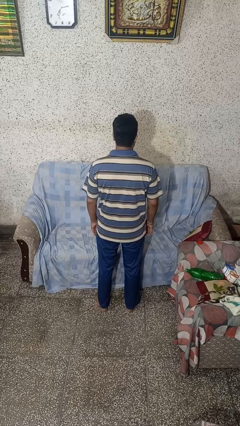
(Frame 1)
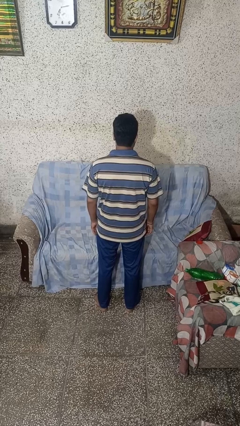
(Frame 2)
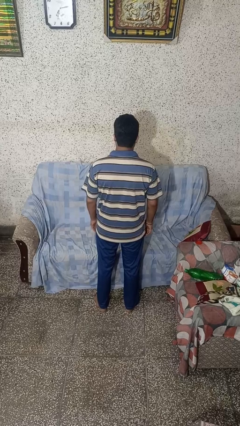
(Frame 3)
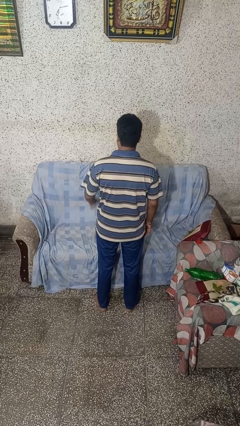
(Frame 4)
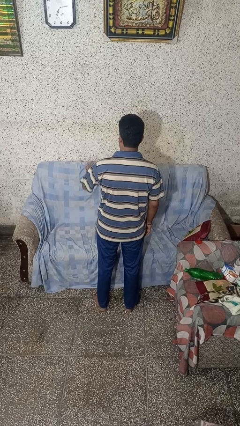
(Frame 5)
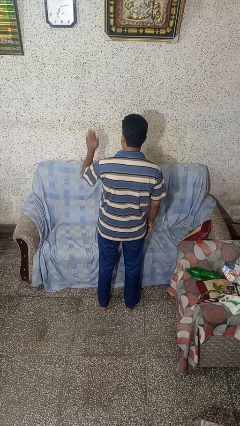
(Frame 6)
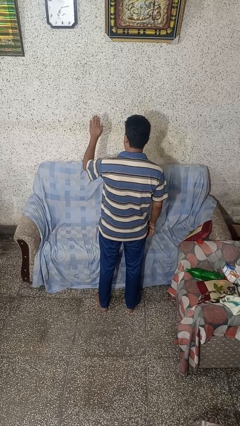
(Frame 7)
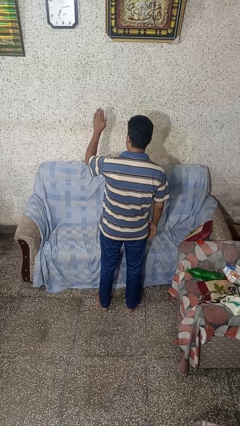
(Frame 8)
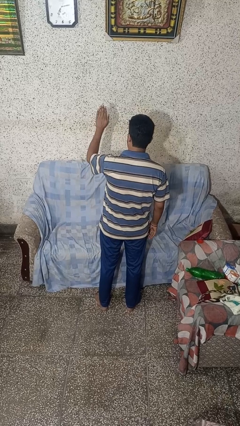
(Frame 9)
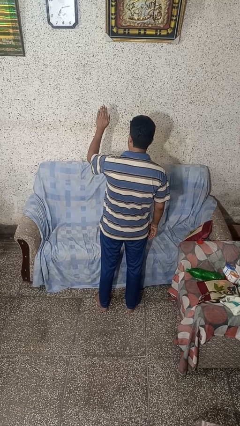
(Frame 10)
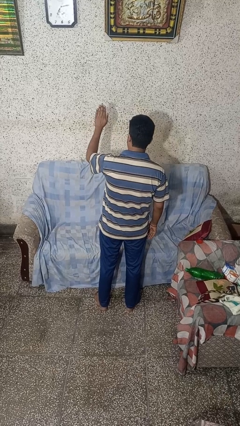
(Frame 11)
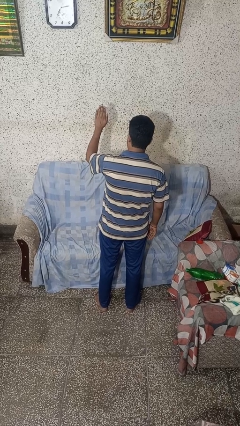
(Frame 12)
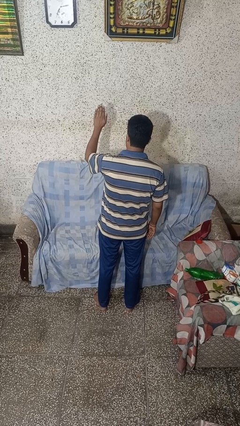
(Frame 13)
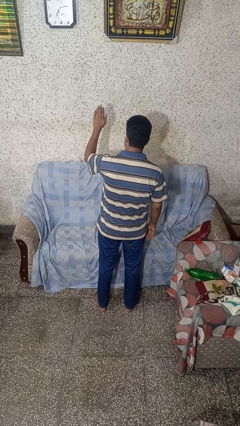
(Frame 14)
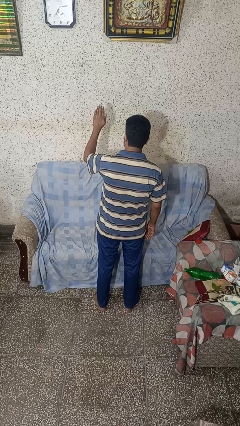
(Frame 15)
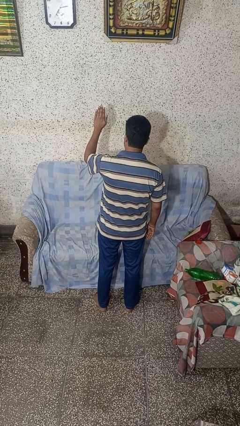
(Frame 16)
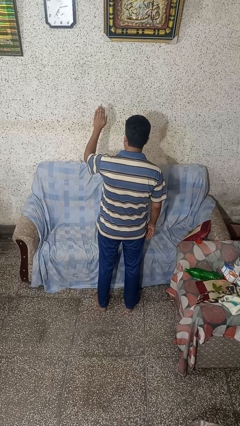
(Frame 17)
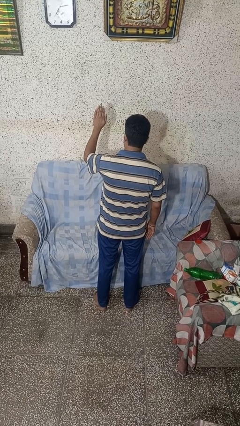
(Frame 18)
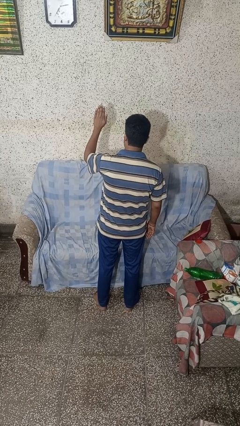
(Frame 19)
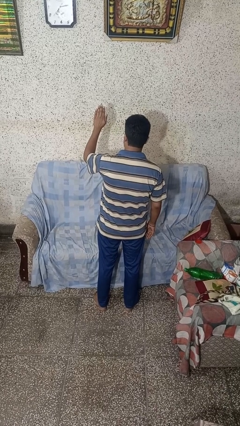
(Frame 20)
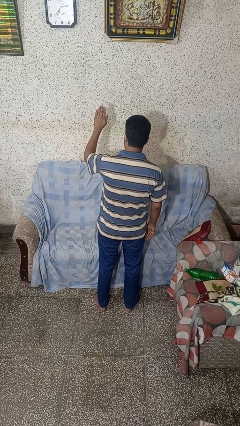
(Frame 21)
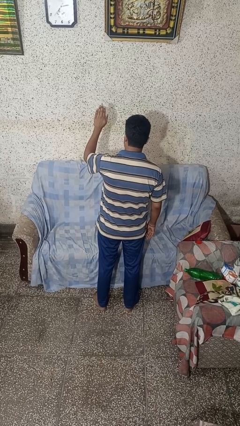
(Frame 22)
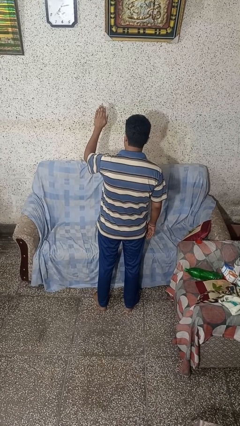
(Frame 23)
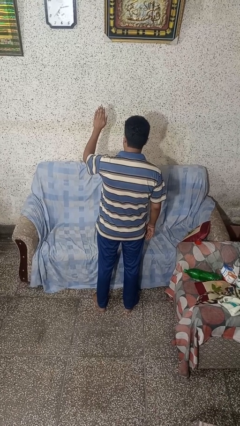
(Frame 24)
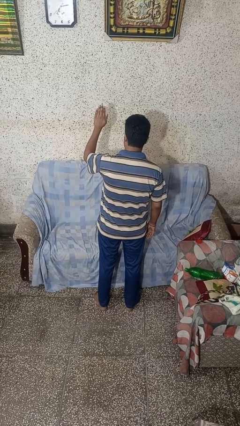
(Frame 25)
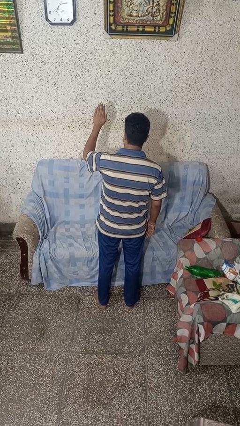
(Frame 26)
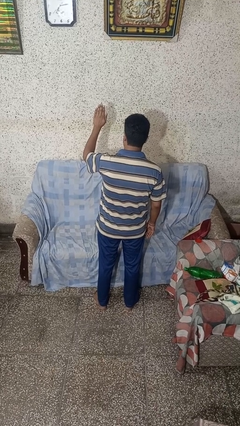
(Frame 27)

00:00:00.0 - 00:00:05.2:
person gestures stop

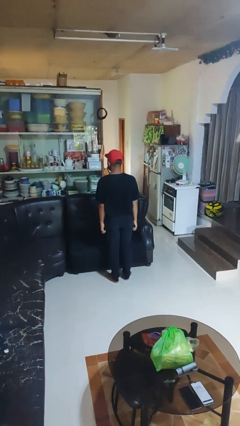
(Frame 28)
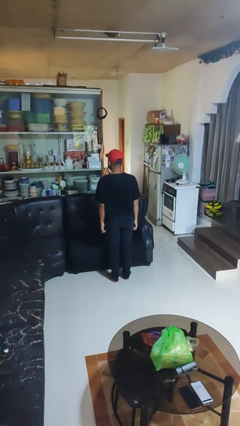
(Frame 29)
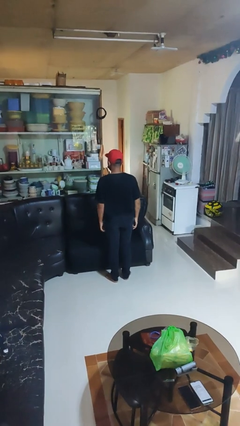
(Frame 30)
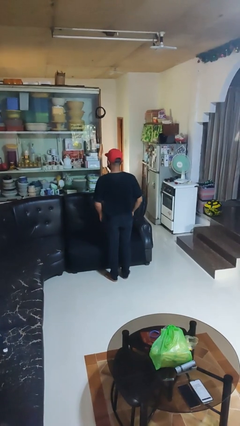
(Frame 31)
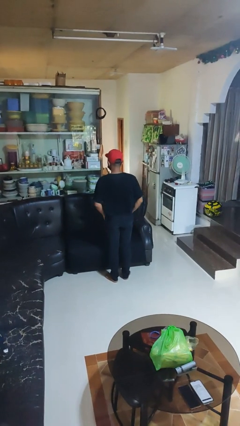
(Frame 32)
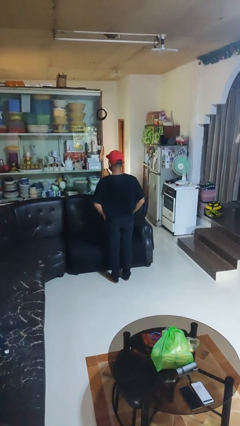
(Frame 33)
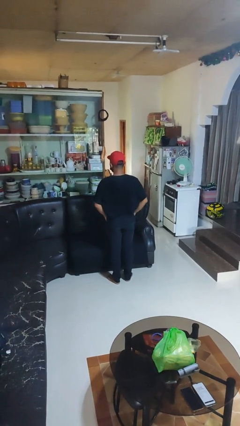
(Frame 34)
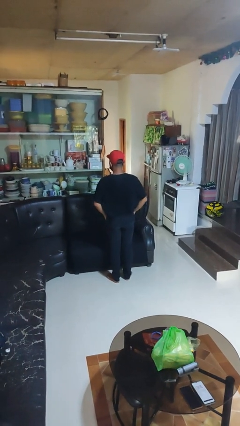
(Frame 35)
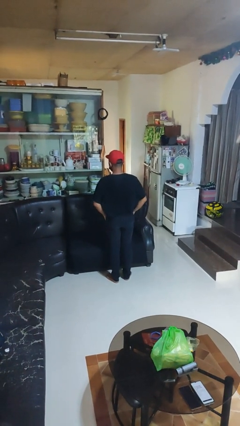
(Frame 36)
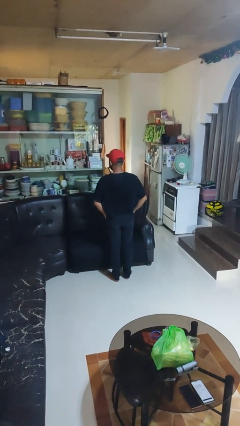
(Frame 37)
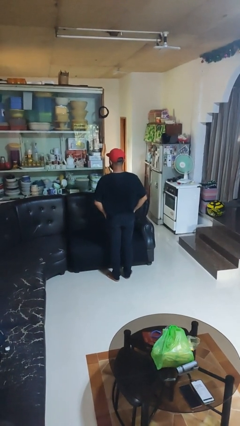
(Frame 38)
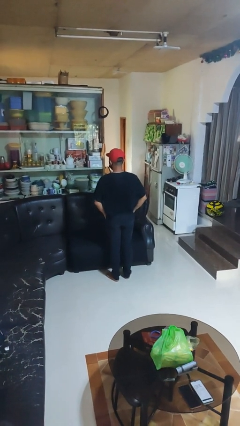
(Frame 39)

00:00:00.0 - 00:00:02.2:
person puts hands in back pockets

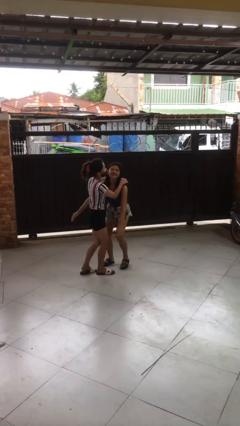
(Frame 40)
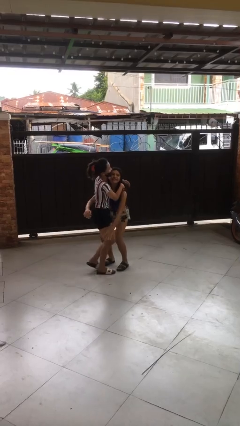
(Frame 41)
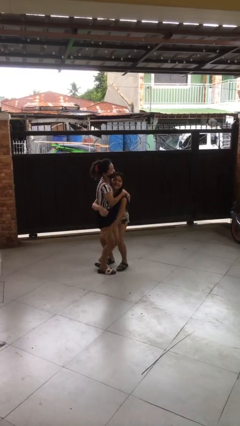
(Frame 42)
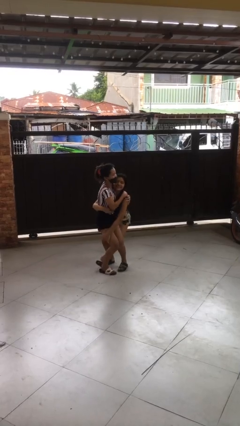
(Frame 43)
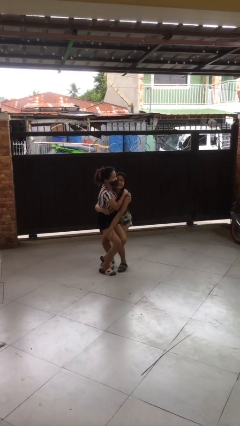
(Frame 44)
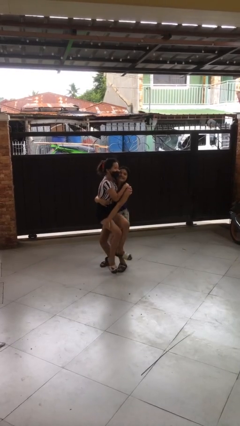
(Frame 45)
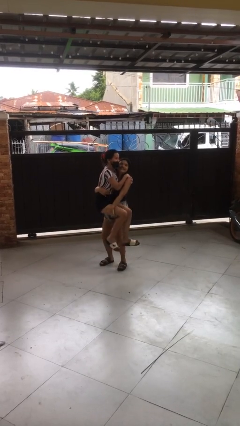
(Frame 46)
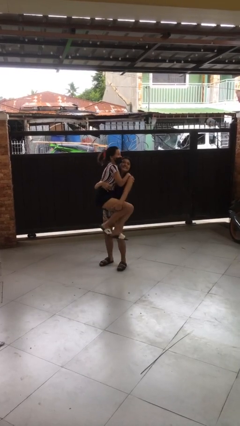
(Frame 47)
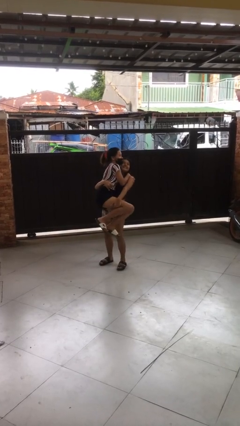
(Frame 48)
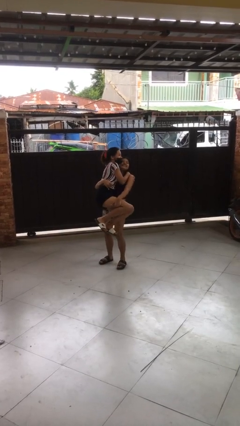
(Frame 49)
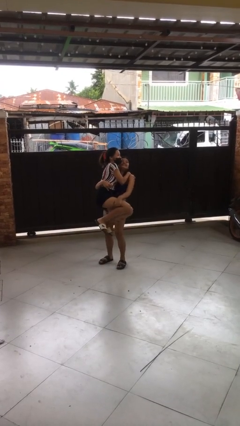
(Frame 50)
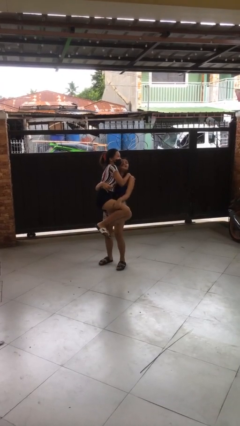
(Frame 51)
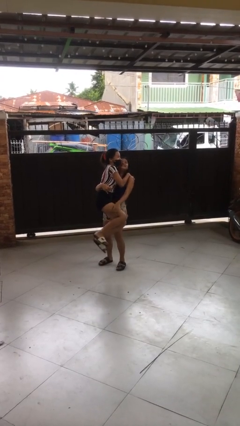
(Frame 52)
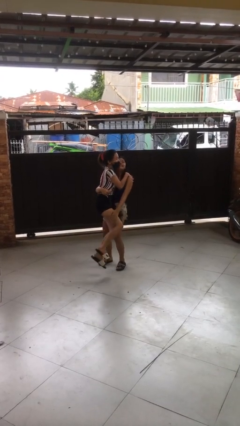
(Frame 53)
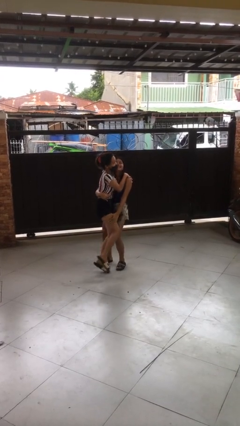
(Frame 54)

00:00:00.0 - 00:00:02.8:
person picks up person

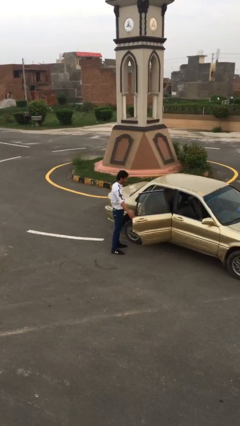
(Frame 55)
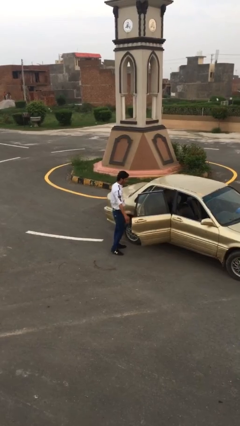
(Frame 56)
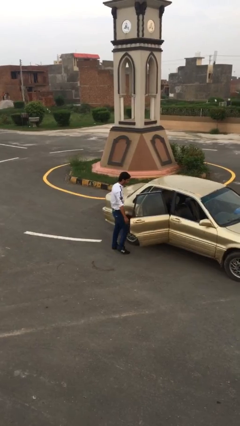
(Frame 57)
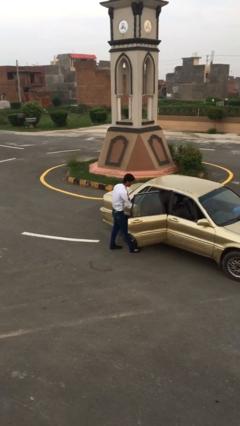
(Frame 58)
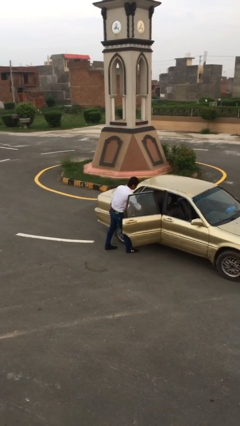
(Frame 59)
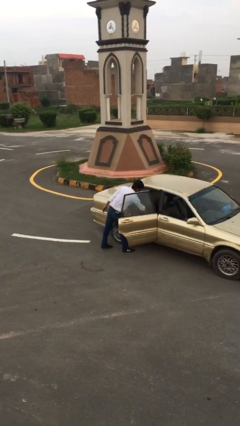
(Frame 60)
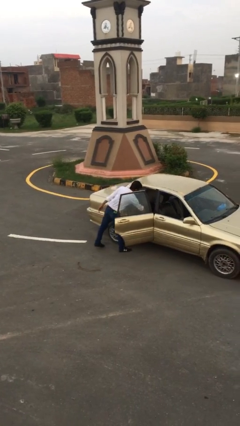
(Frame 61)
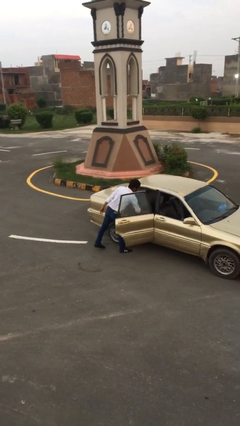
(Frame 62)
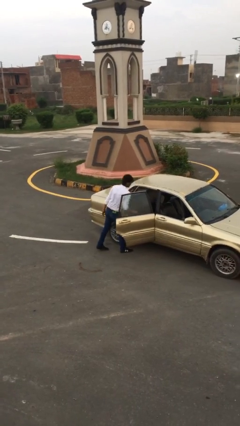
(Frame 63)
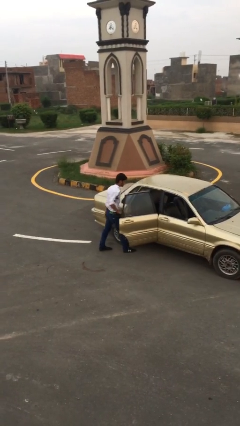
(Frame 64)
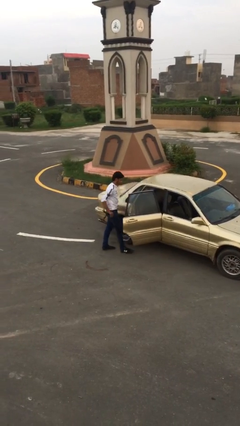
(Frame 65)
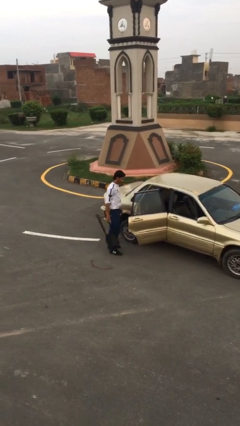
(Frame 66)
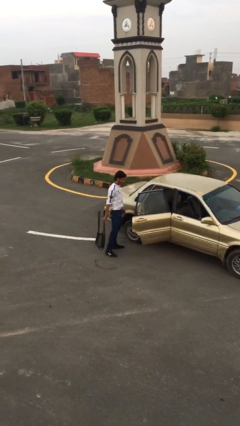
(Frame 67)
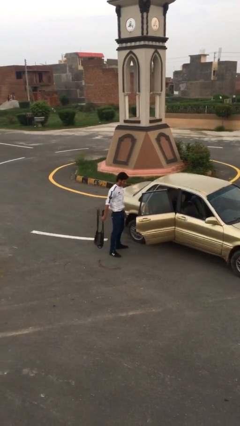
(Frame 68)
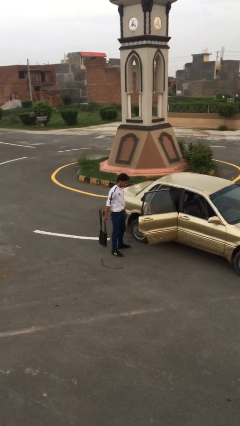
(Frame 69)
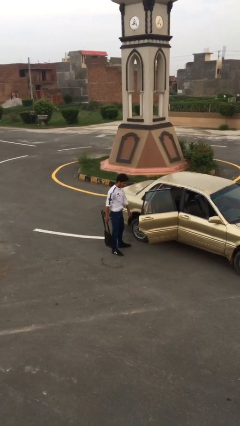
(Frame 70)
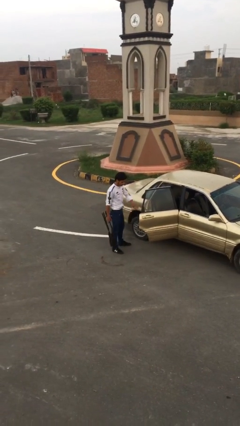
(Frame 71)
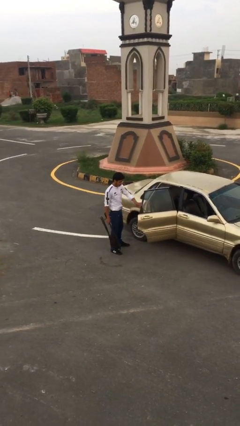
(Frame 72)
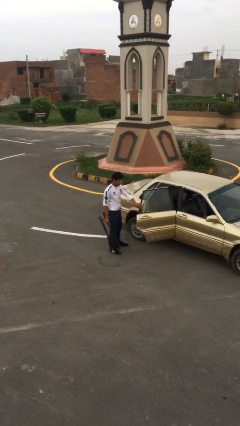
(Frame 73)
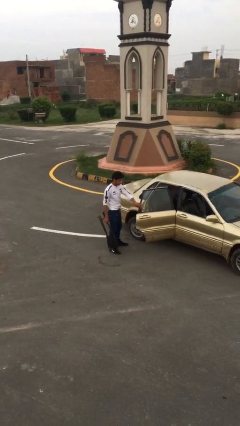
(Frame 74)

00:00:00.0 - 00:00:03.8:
person unloads car

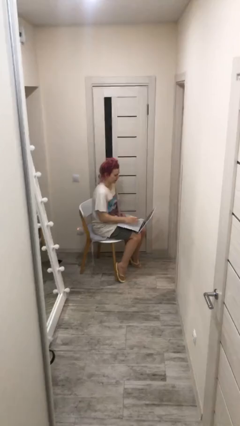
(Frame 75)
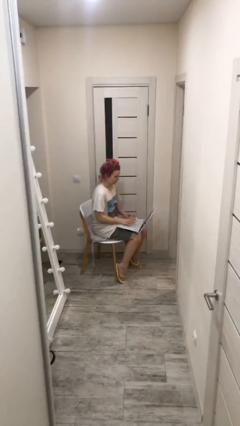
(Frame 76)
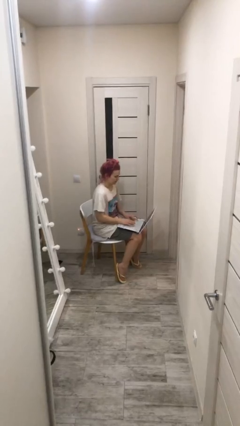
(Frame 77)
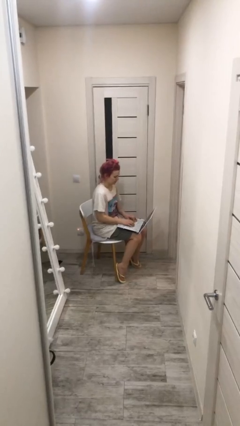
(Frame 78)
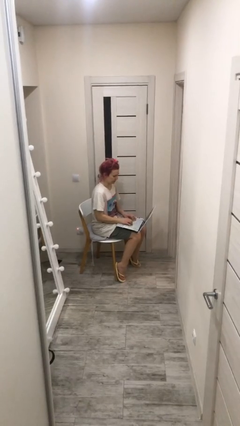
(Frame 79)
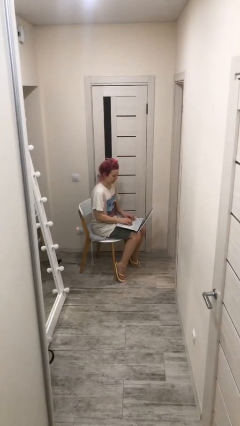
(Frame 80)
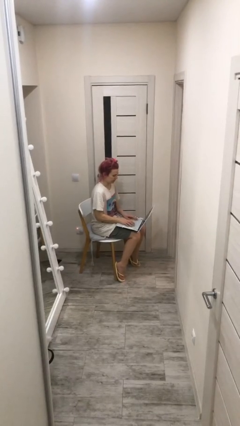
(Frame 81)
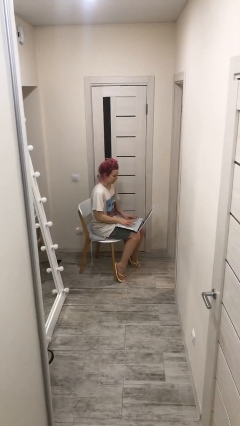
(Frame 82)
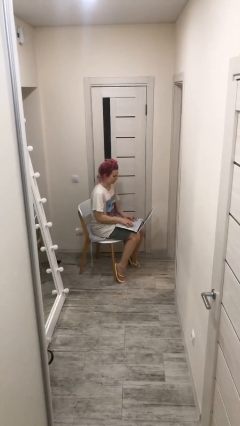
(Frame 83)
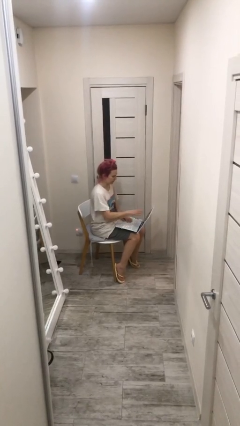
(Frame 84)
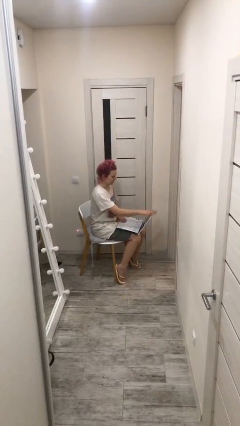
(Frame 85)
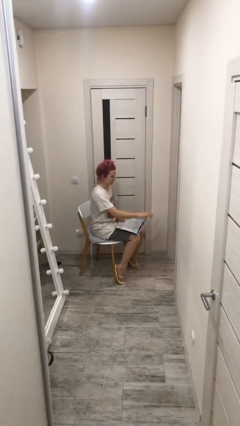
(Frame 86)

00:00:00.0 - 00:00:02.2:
person interacts with laptop

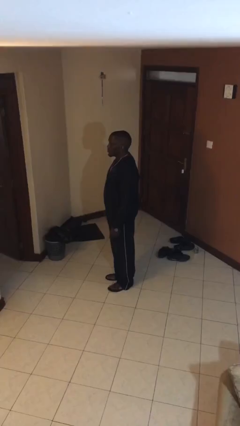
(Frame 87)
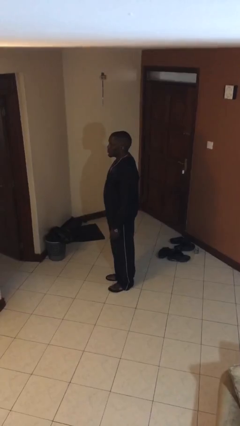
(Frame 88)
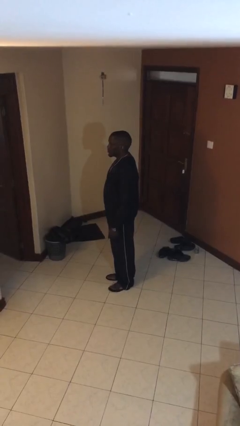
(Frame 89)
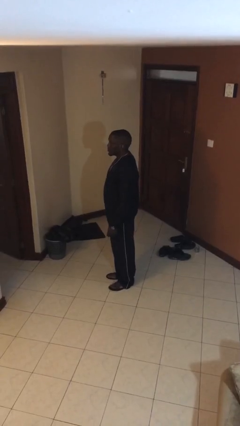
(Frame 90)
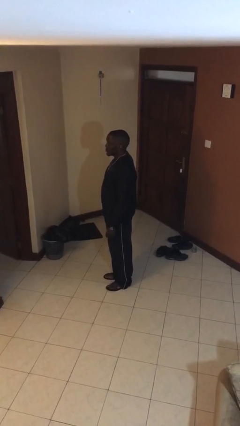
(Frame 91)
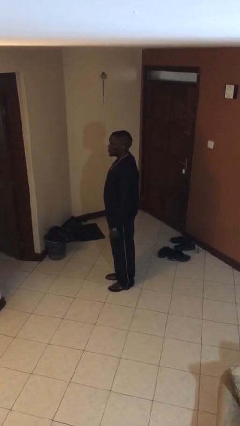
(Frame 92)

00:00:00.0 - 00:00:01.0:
person applies lip makeup
